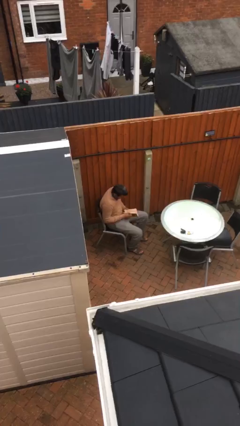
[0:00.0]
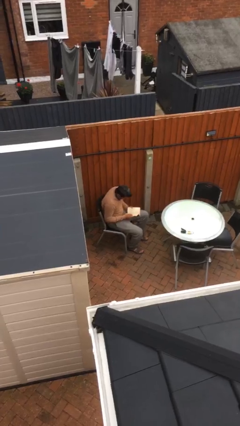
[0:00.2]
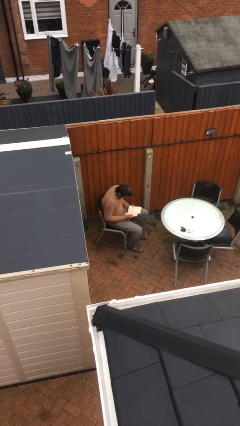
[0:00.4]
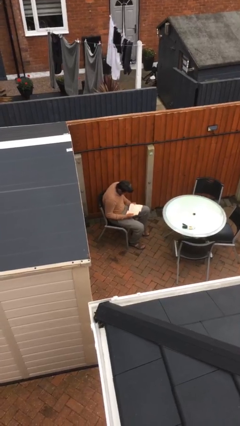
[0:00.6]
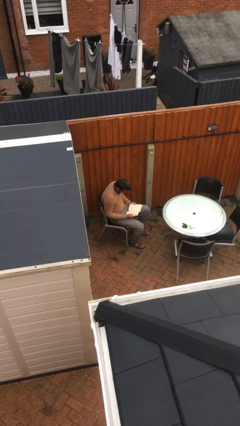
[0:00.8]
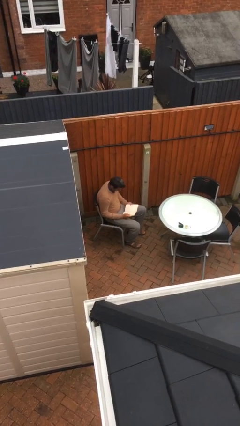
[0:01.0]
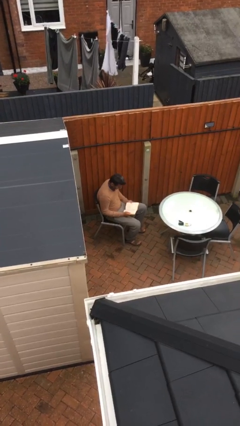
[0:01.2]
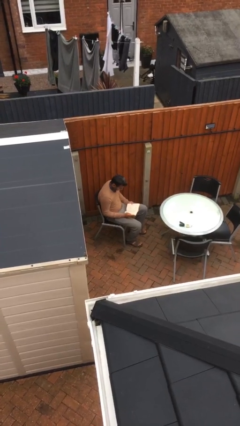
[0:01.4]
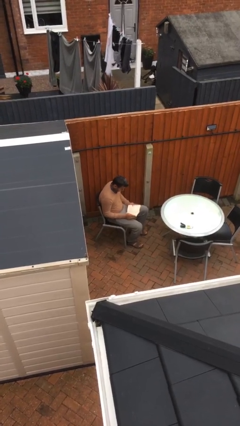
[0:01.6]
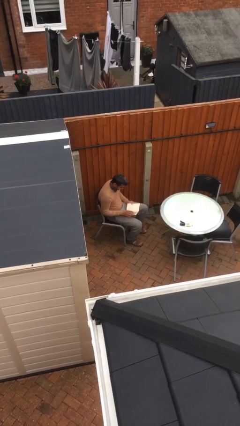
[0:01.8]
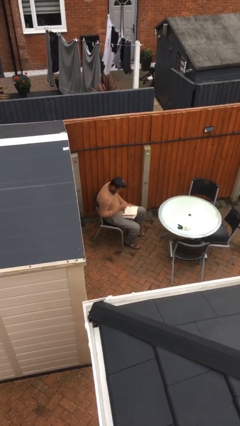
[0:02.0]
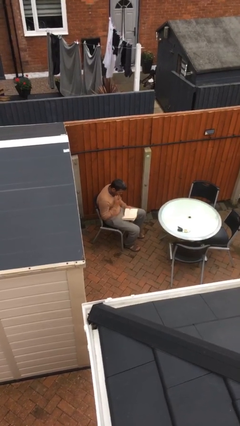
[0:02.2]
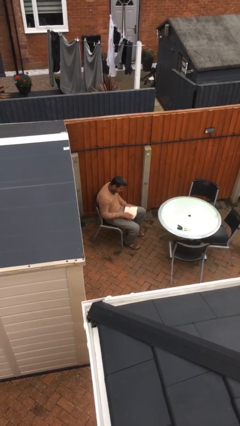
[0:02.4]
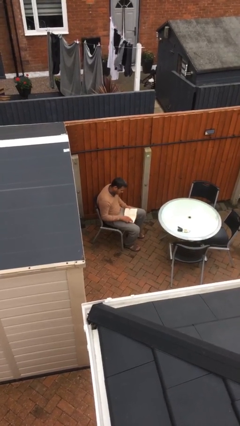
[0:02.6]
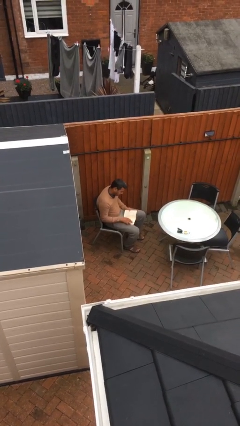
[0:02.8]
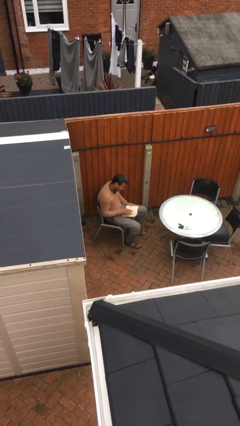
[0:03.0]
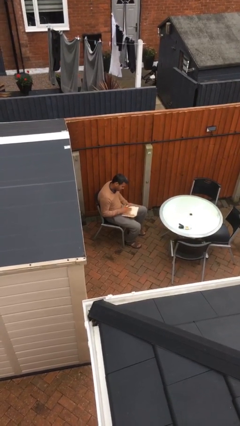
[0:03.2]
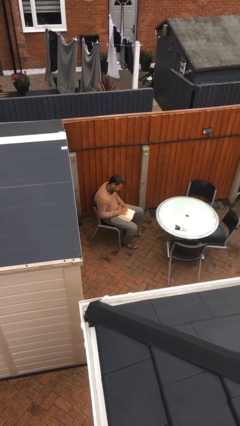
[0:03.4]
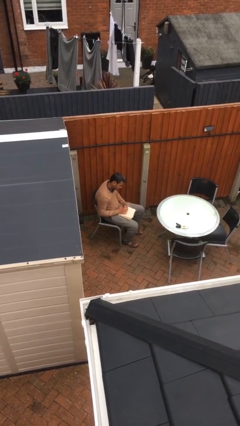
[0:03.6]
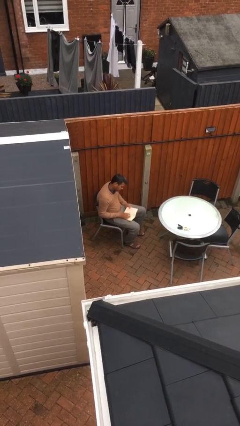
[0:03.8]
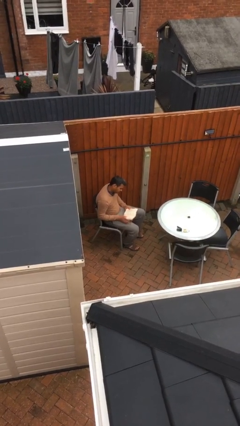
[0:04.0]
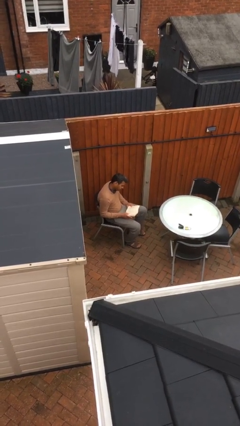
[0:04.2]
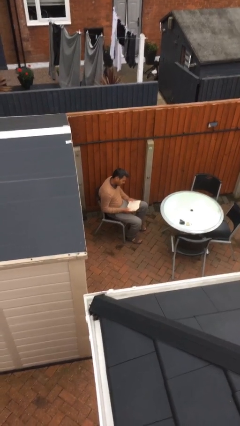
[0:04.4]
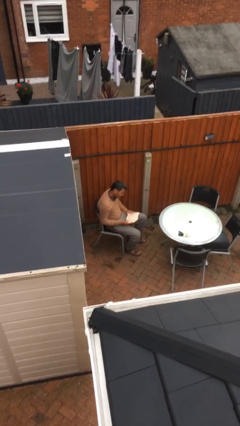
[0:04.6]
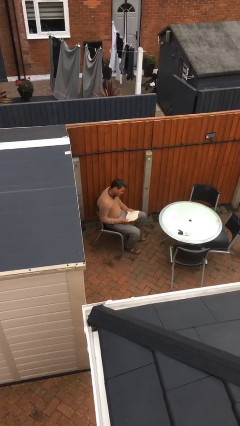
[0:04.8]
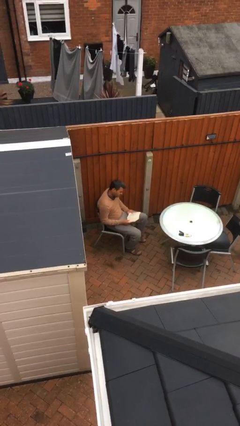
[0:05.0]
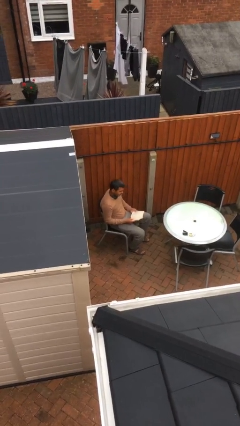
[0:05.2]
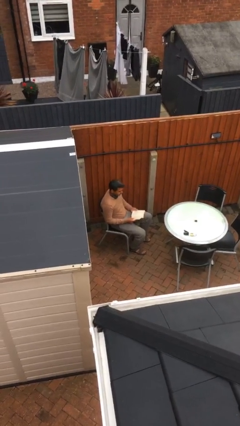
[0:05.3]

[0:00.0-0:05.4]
person reads document

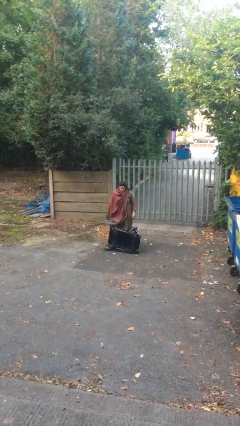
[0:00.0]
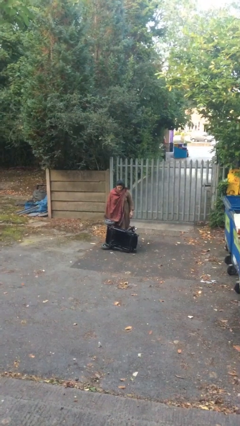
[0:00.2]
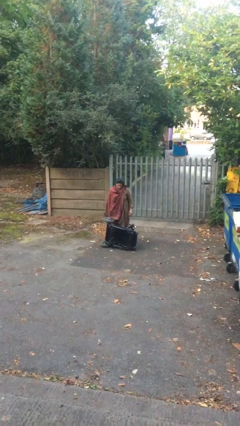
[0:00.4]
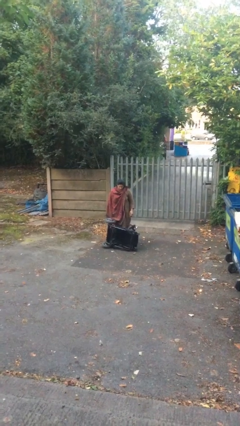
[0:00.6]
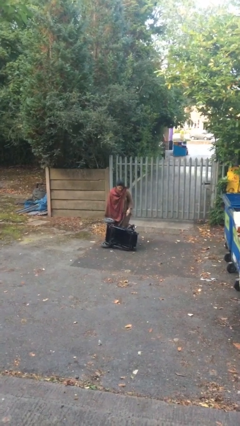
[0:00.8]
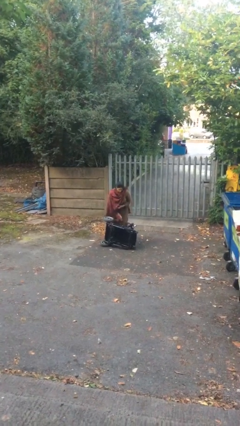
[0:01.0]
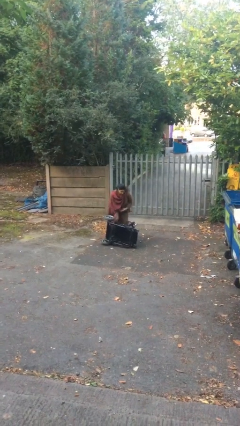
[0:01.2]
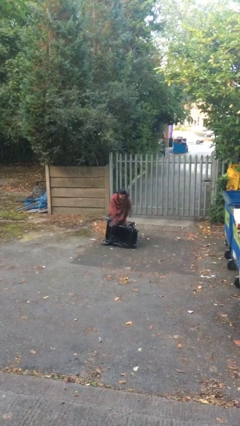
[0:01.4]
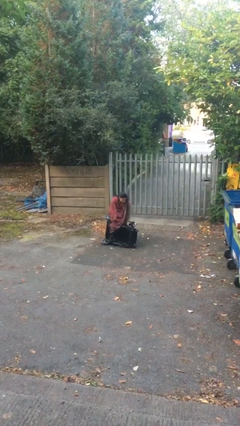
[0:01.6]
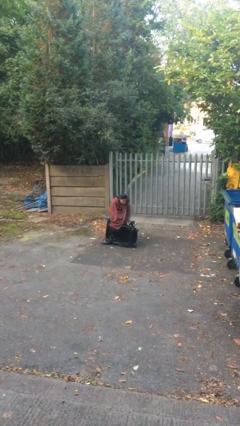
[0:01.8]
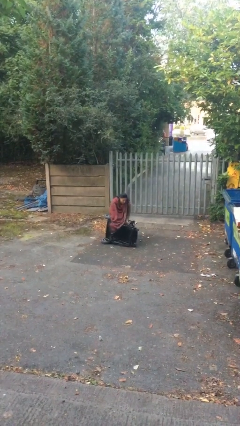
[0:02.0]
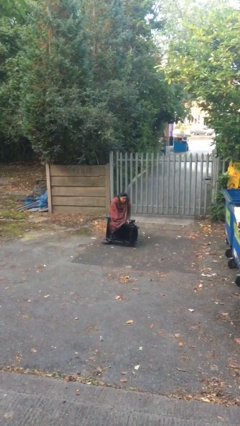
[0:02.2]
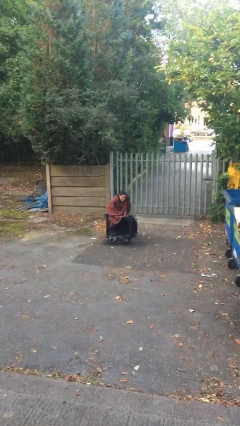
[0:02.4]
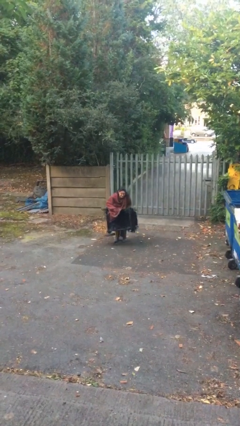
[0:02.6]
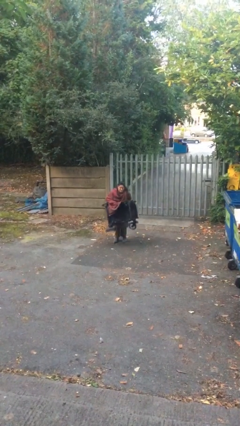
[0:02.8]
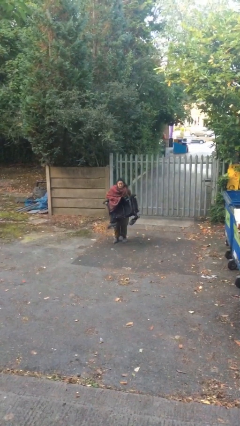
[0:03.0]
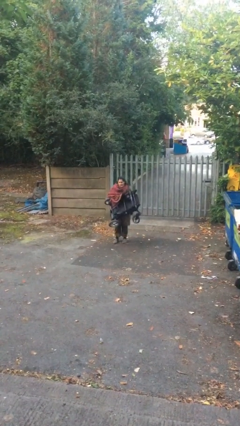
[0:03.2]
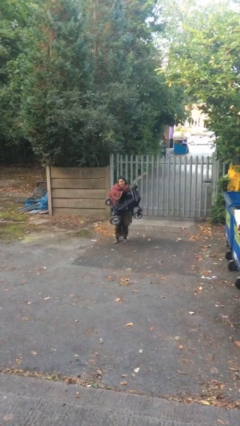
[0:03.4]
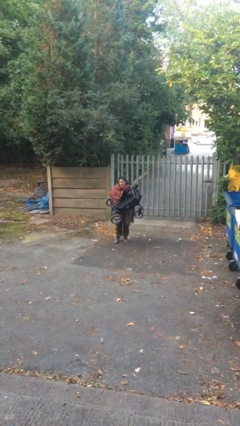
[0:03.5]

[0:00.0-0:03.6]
person picks up object from floor

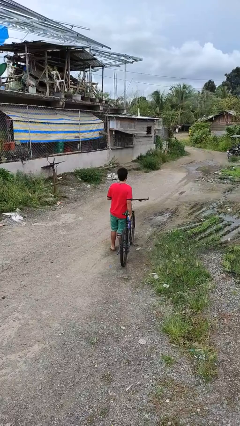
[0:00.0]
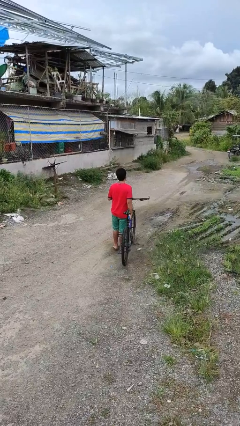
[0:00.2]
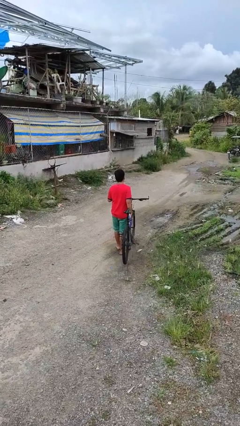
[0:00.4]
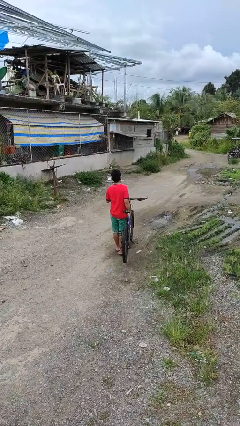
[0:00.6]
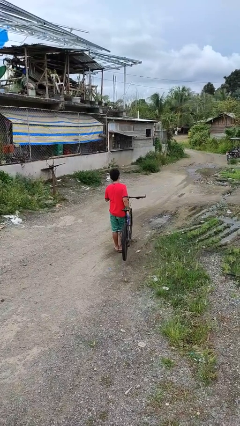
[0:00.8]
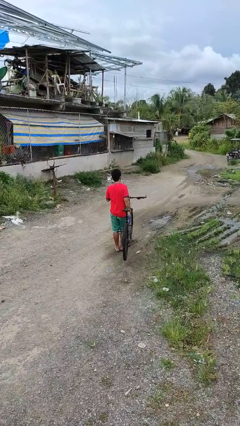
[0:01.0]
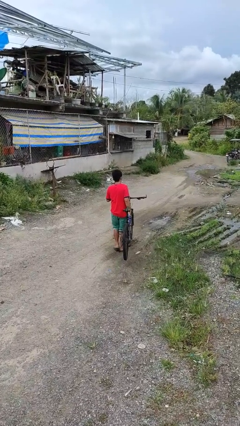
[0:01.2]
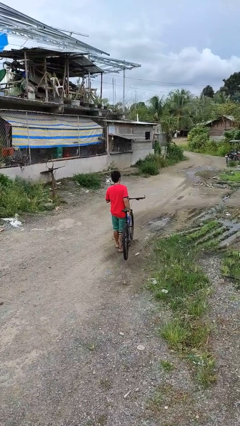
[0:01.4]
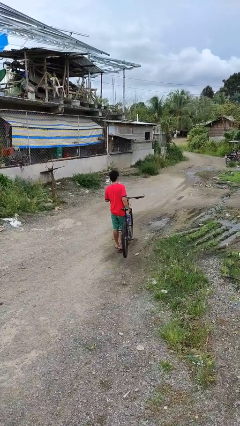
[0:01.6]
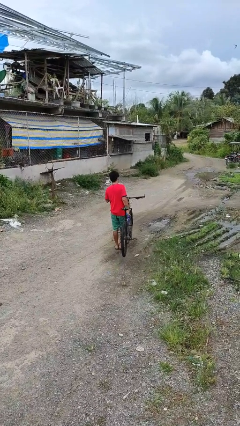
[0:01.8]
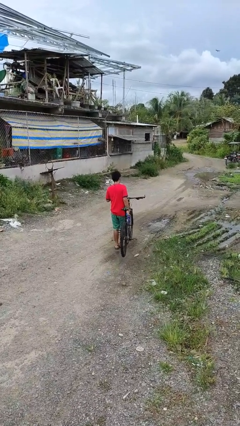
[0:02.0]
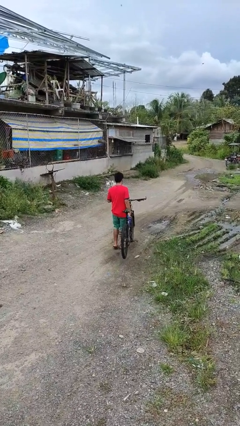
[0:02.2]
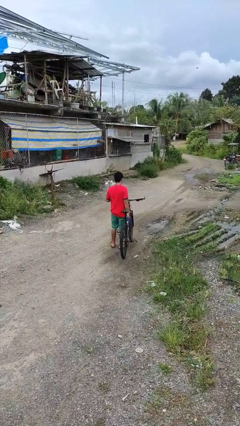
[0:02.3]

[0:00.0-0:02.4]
person carries bicycle

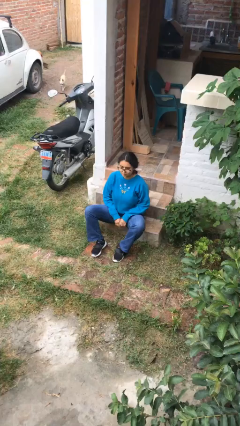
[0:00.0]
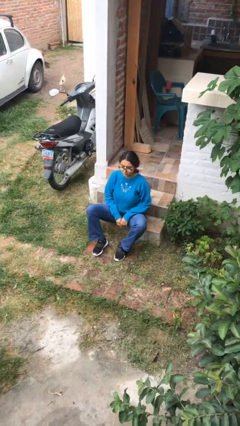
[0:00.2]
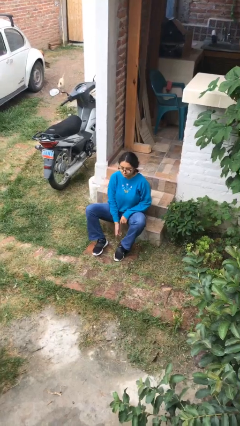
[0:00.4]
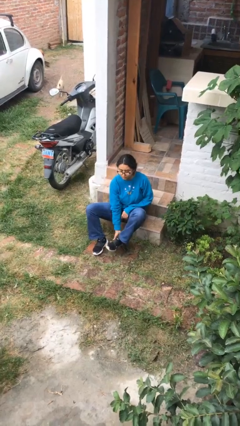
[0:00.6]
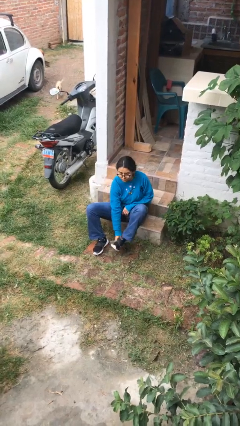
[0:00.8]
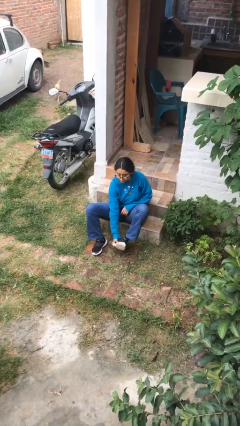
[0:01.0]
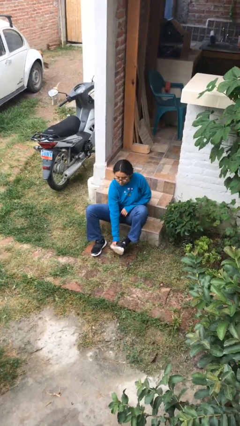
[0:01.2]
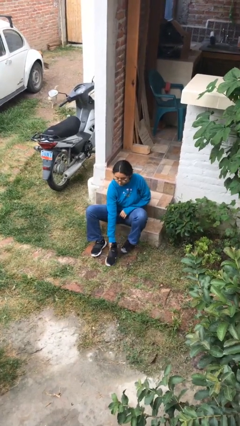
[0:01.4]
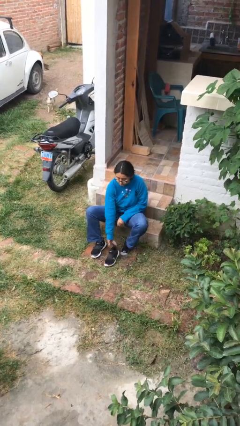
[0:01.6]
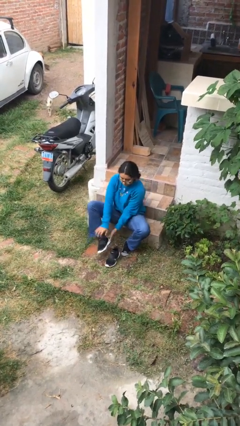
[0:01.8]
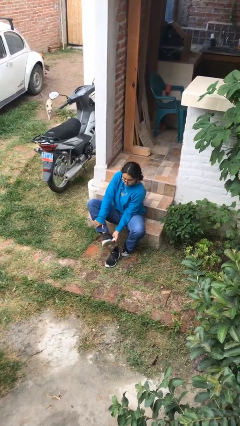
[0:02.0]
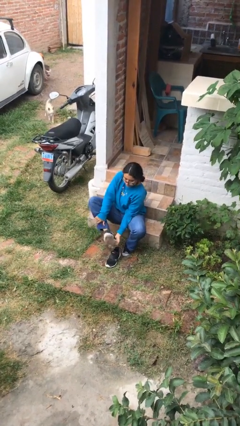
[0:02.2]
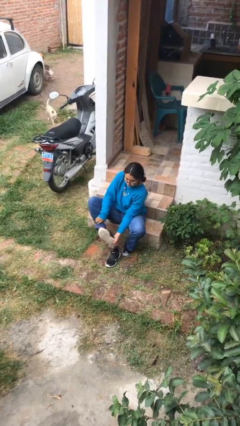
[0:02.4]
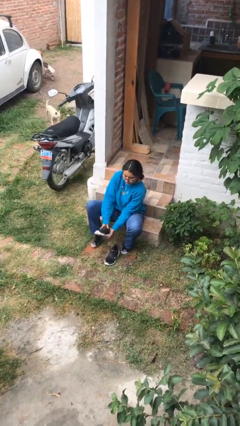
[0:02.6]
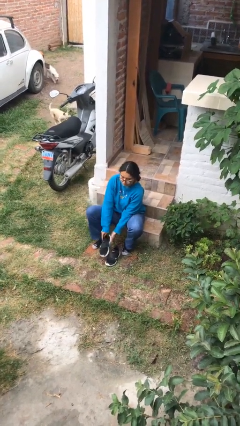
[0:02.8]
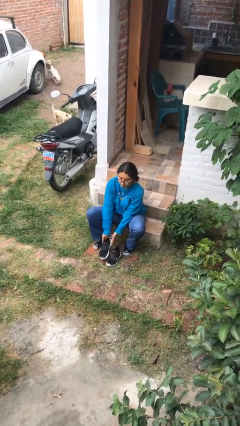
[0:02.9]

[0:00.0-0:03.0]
person takes off shoes

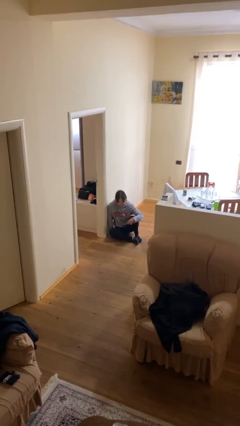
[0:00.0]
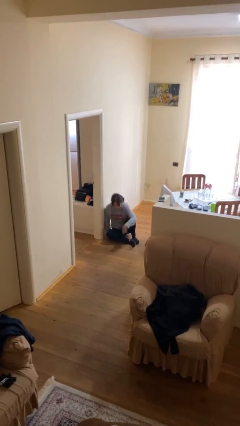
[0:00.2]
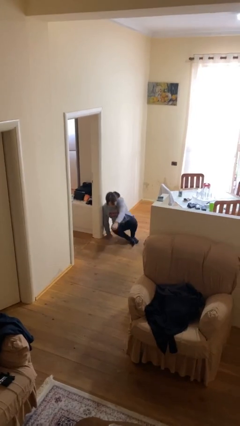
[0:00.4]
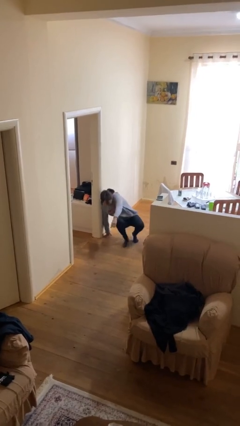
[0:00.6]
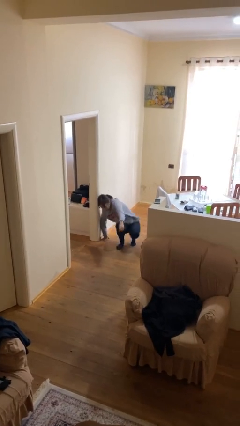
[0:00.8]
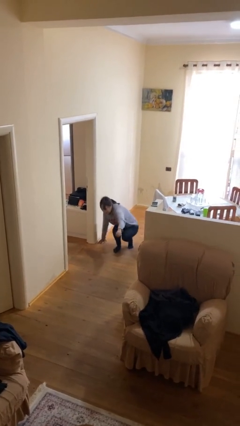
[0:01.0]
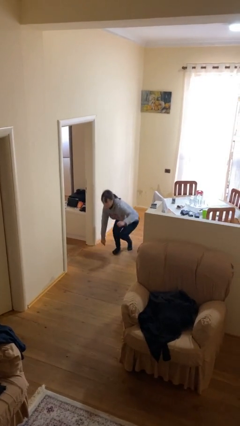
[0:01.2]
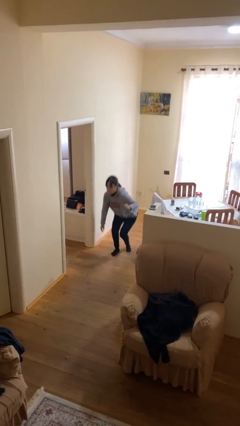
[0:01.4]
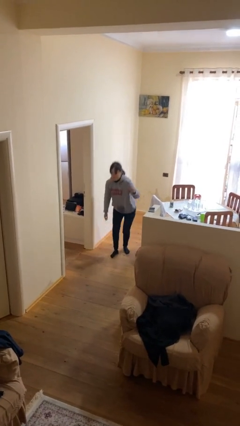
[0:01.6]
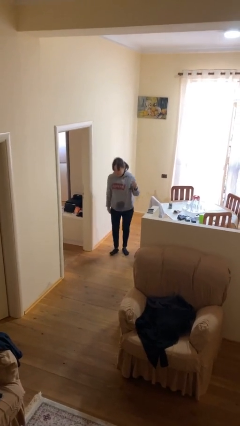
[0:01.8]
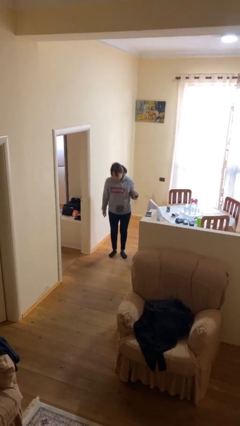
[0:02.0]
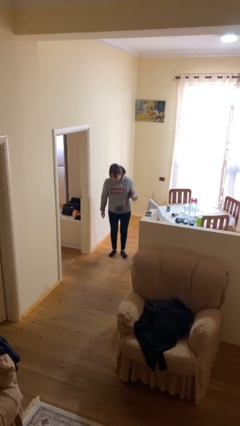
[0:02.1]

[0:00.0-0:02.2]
person stands up

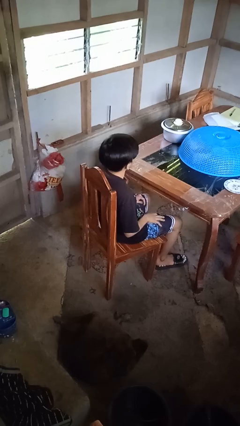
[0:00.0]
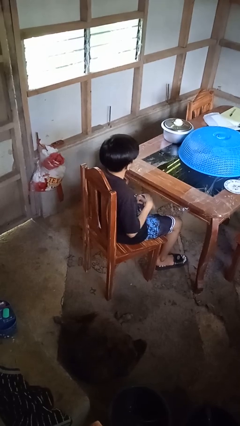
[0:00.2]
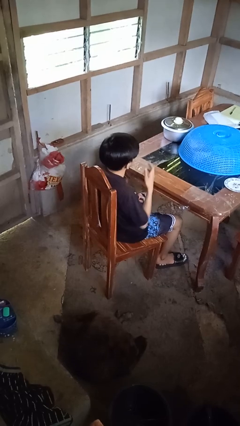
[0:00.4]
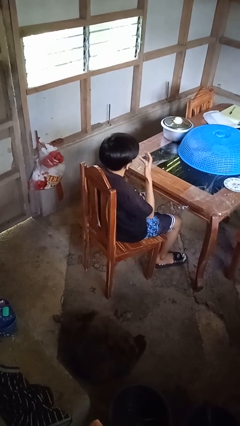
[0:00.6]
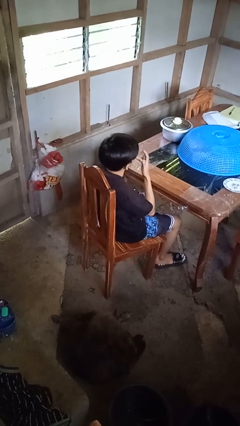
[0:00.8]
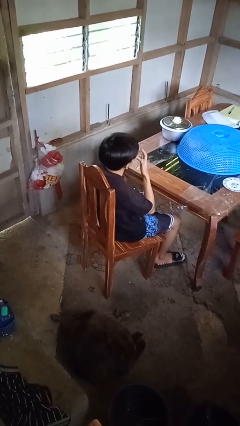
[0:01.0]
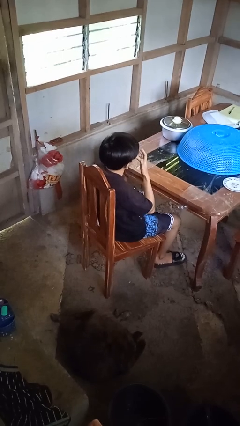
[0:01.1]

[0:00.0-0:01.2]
person licks fingers

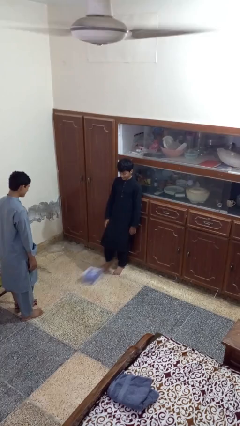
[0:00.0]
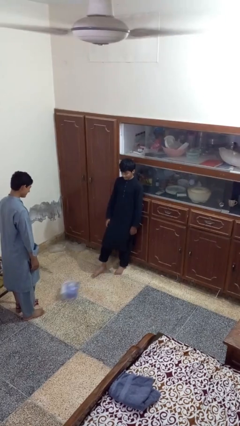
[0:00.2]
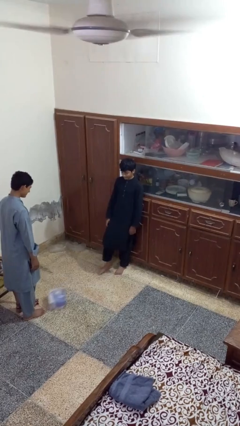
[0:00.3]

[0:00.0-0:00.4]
person kicks object to person
